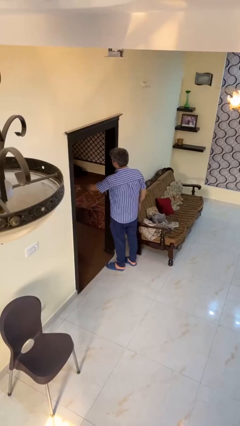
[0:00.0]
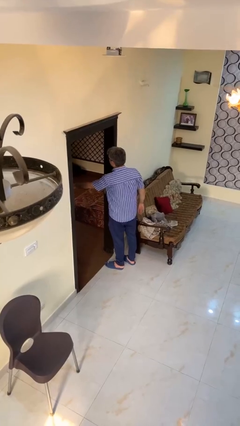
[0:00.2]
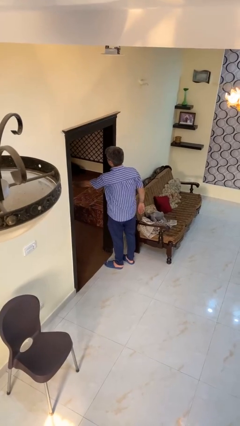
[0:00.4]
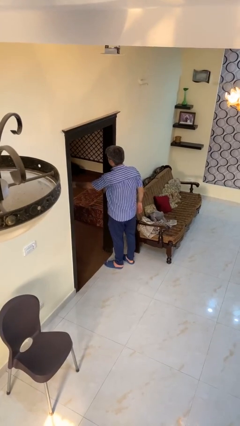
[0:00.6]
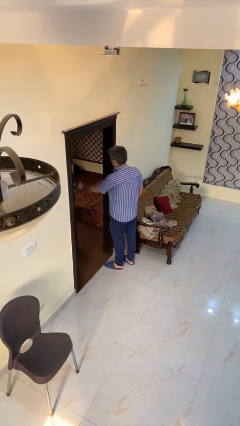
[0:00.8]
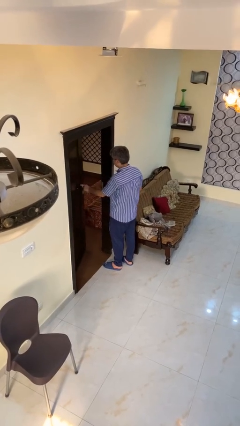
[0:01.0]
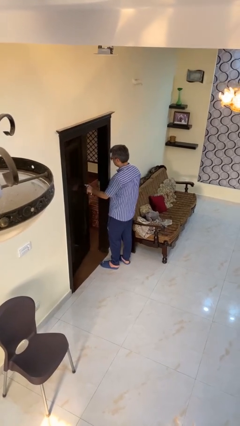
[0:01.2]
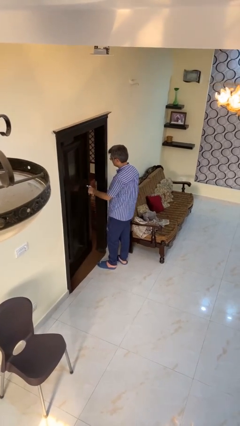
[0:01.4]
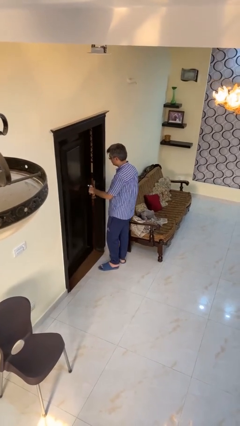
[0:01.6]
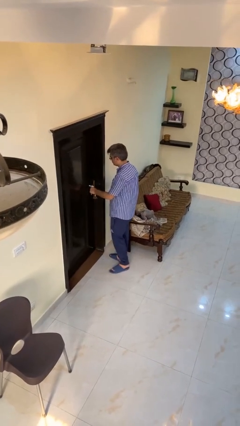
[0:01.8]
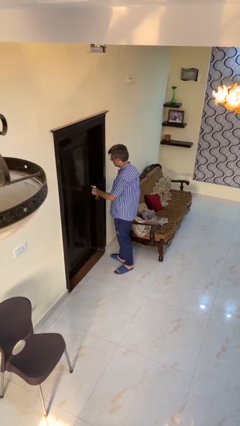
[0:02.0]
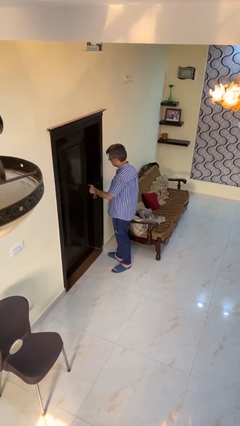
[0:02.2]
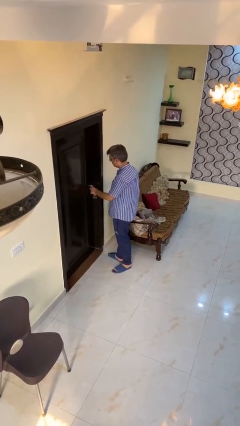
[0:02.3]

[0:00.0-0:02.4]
person closes facility door

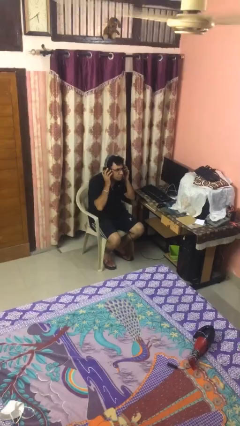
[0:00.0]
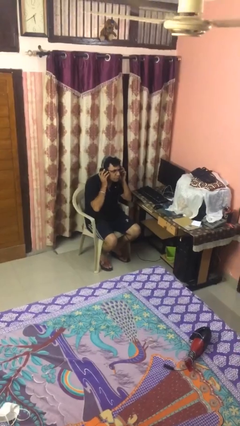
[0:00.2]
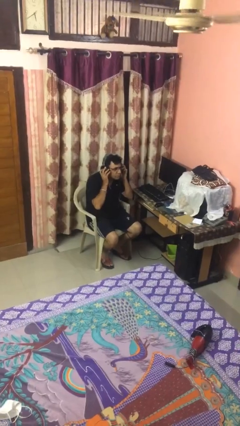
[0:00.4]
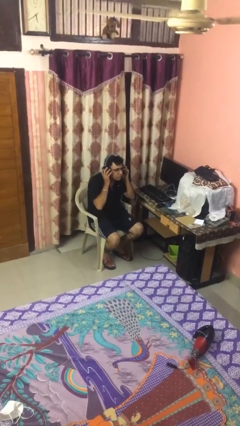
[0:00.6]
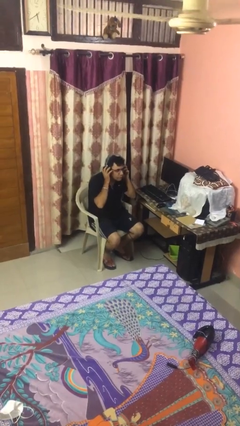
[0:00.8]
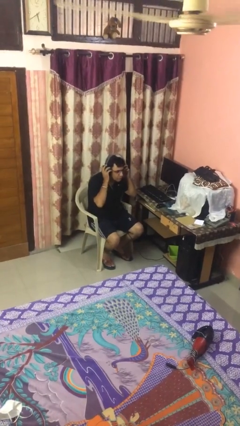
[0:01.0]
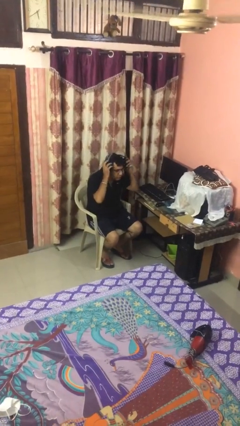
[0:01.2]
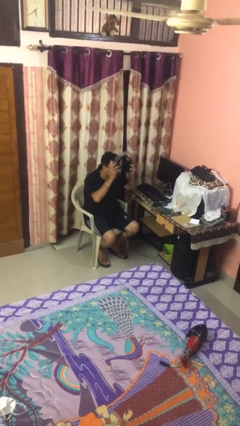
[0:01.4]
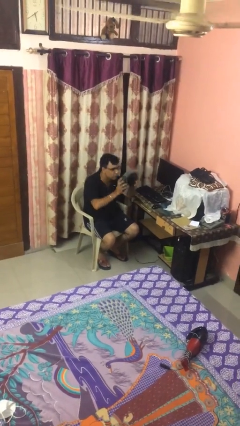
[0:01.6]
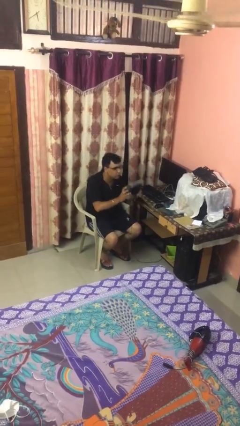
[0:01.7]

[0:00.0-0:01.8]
person takes off headphones

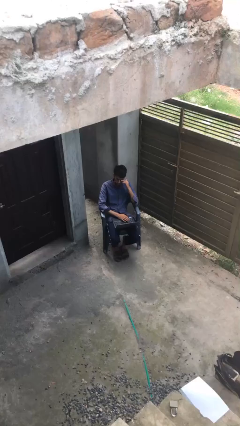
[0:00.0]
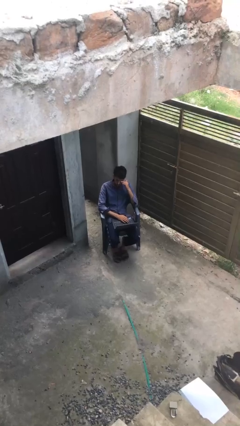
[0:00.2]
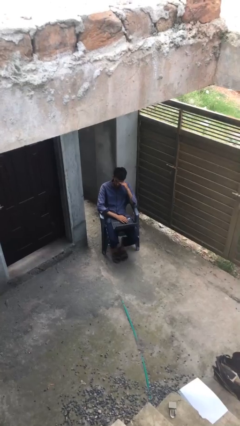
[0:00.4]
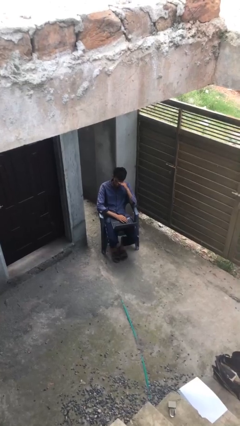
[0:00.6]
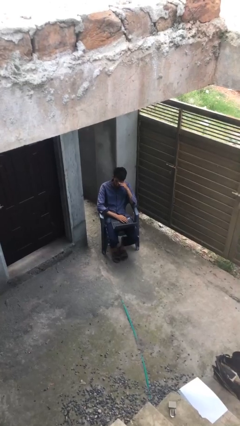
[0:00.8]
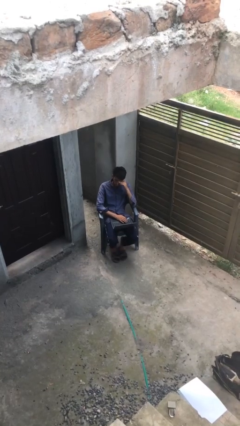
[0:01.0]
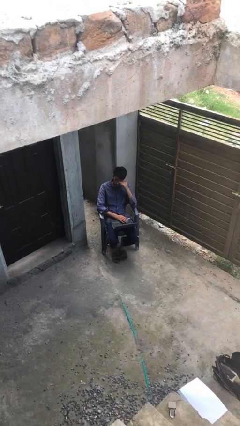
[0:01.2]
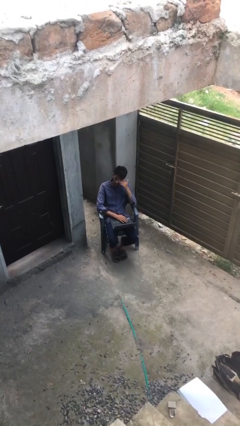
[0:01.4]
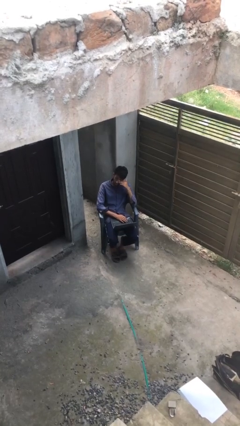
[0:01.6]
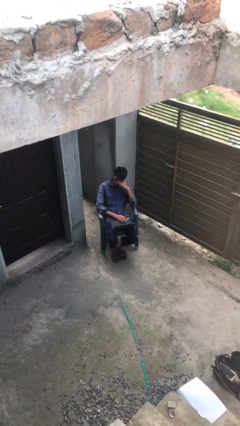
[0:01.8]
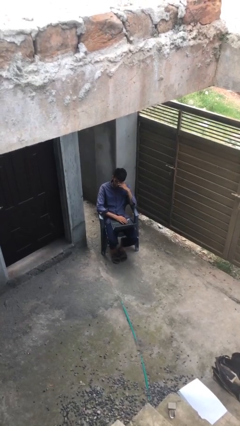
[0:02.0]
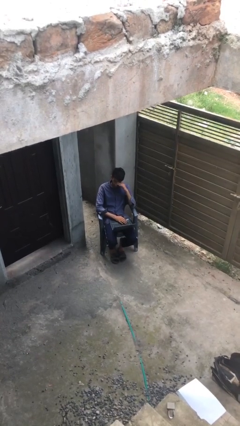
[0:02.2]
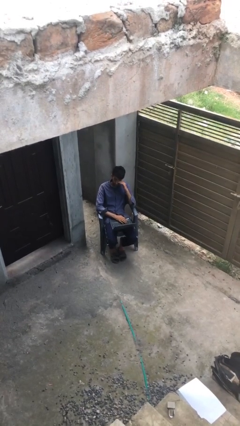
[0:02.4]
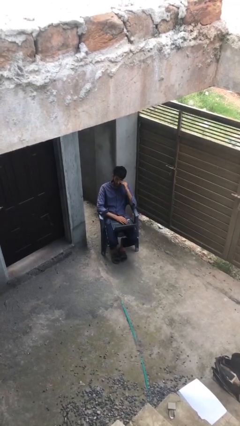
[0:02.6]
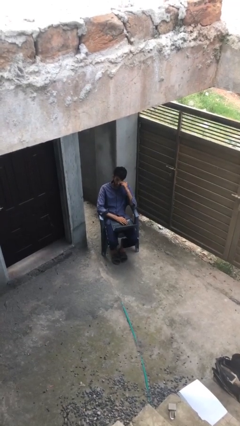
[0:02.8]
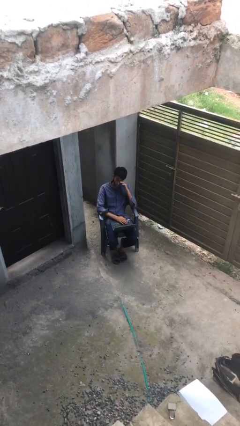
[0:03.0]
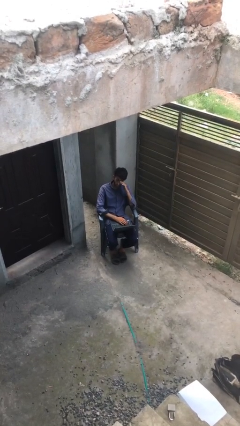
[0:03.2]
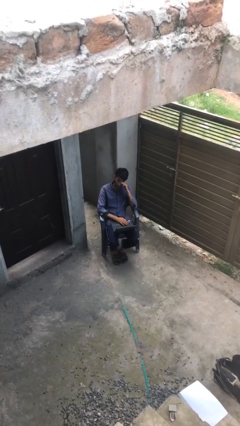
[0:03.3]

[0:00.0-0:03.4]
person interacts with laptop

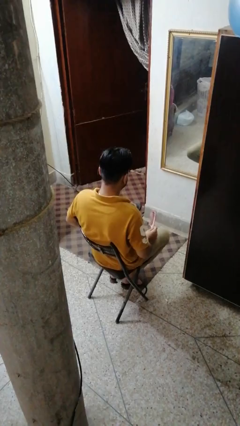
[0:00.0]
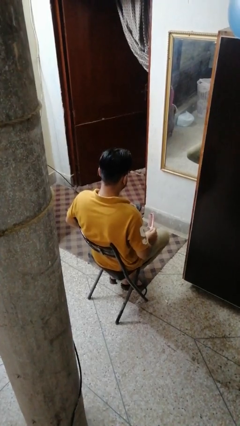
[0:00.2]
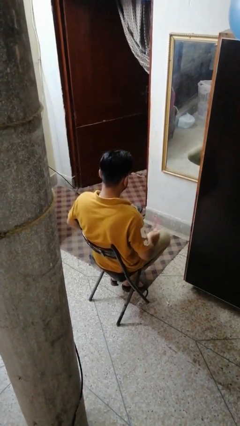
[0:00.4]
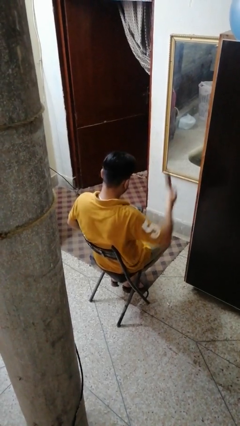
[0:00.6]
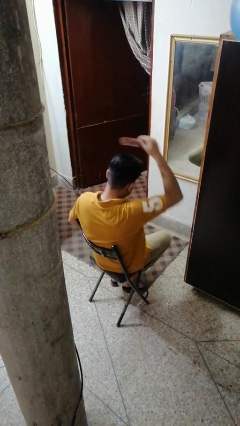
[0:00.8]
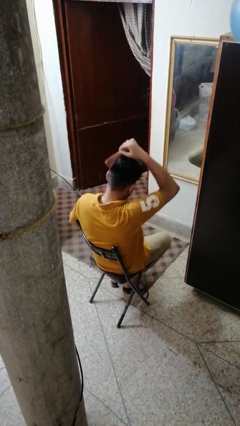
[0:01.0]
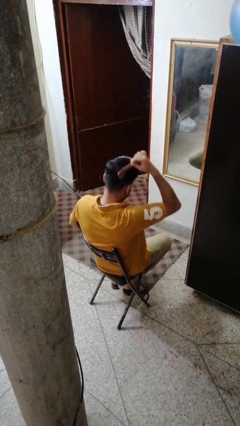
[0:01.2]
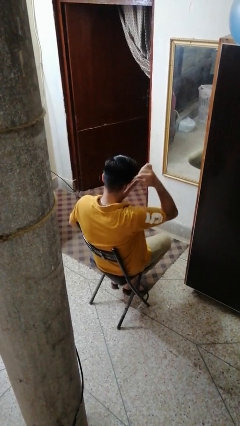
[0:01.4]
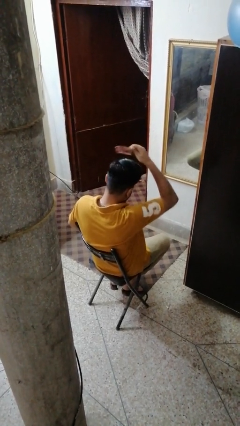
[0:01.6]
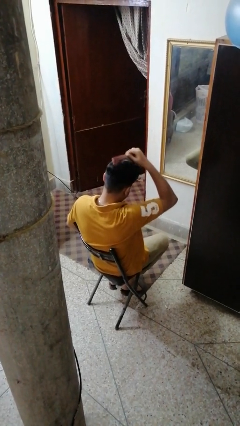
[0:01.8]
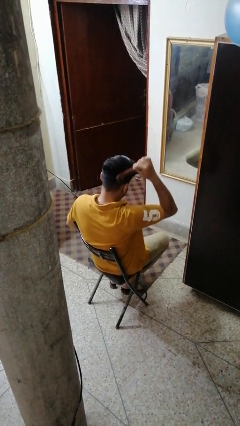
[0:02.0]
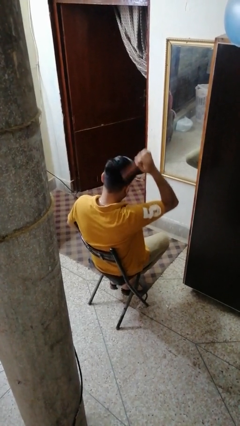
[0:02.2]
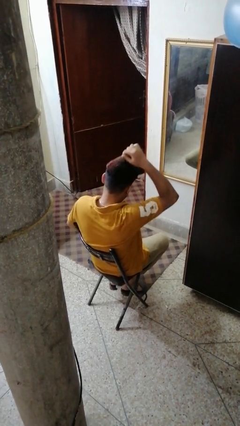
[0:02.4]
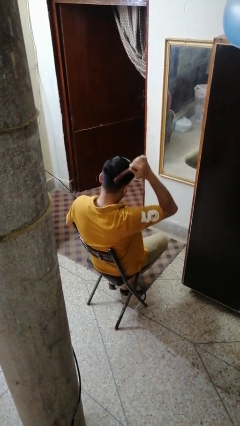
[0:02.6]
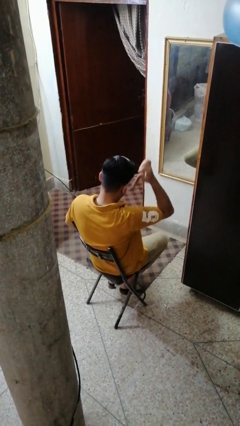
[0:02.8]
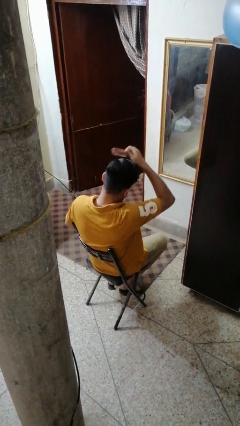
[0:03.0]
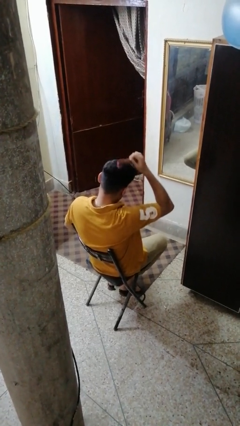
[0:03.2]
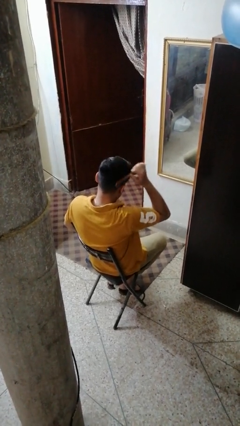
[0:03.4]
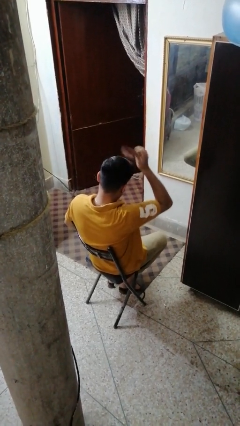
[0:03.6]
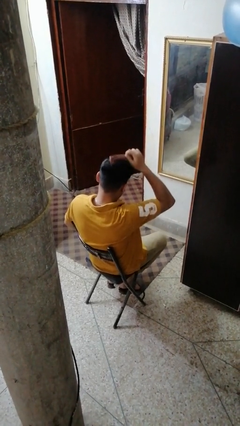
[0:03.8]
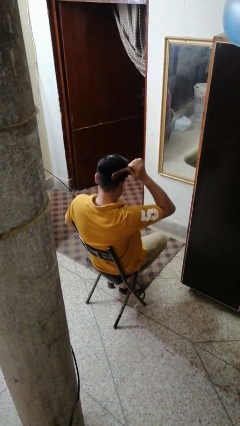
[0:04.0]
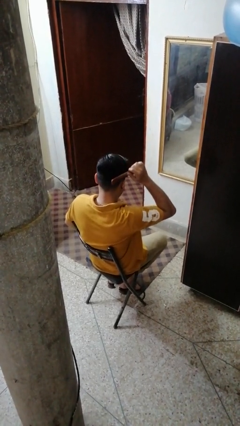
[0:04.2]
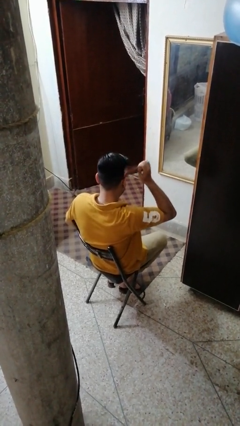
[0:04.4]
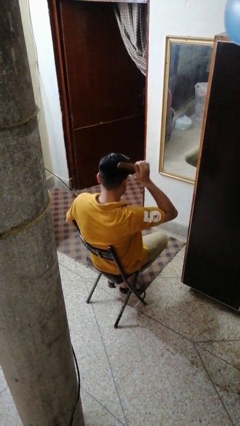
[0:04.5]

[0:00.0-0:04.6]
person brushes hair

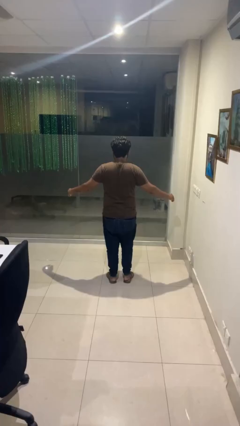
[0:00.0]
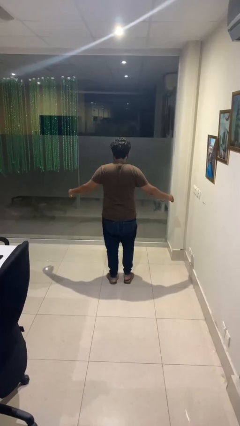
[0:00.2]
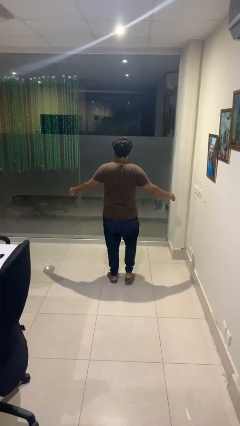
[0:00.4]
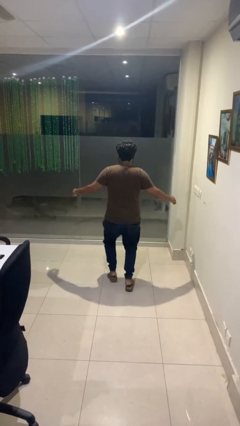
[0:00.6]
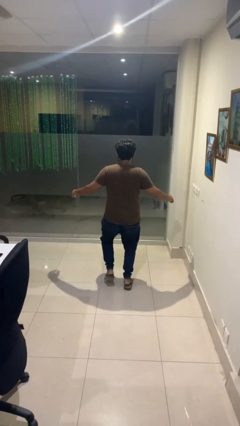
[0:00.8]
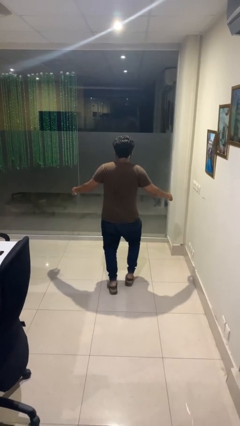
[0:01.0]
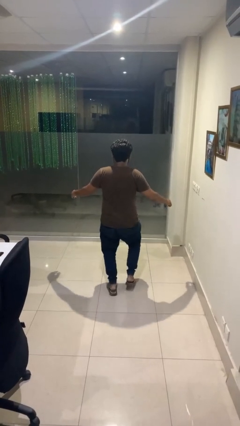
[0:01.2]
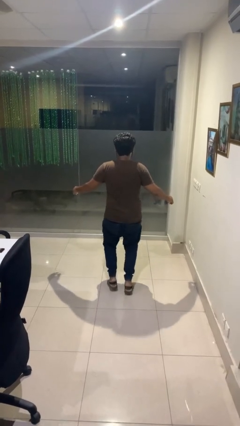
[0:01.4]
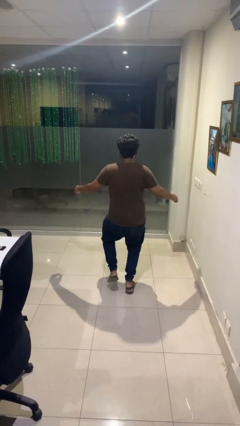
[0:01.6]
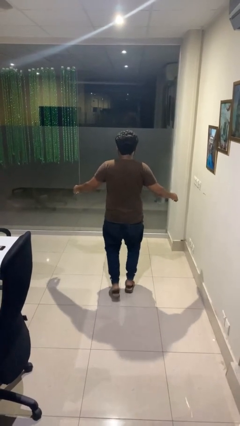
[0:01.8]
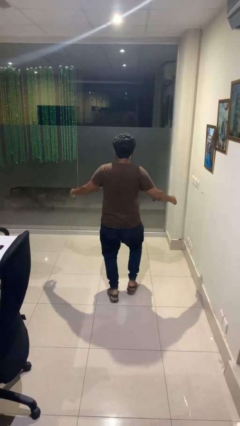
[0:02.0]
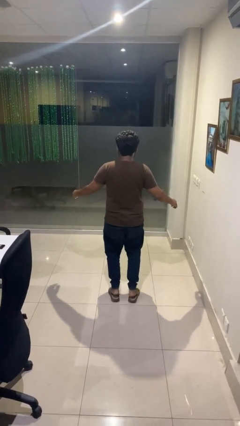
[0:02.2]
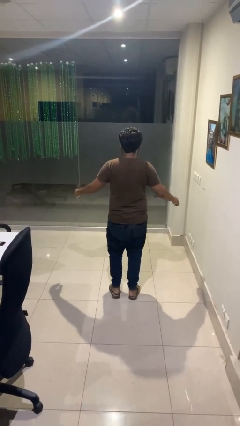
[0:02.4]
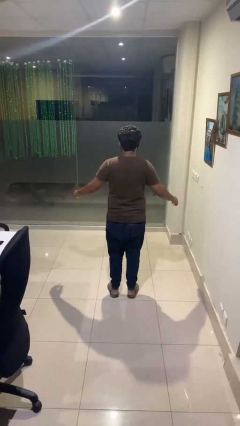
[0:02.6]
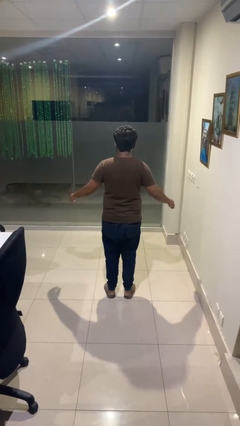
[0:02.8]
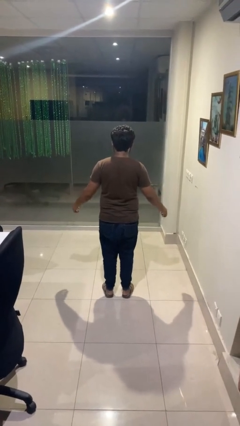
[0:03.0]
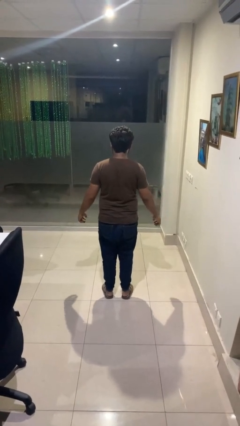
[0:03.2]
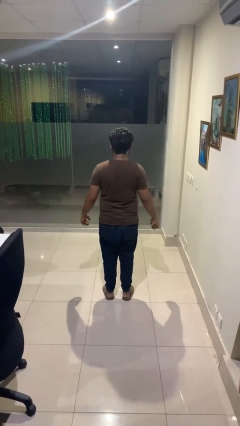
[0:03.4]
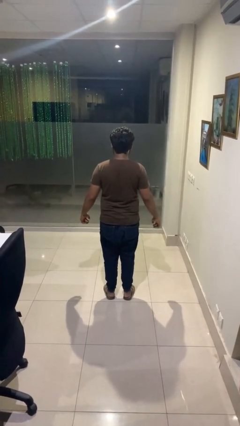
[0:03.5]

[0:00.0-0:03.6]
person walks tiptoe

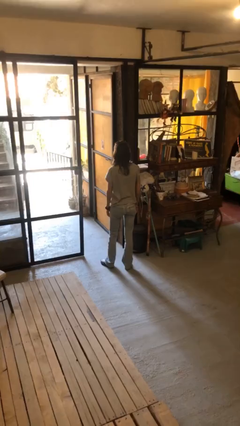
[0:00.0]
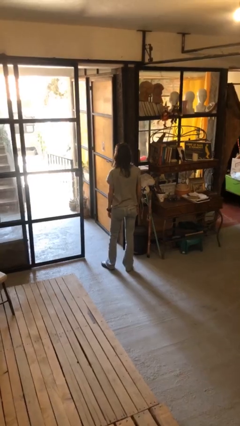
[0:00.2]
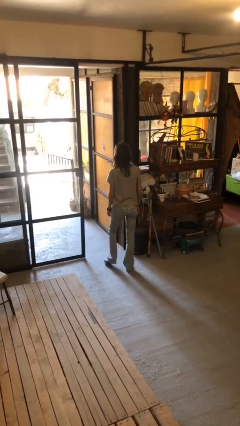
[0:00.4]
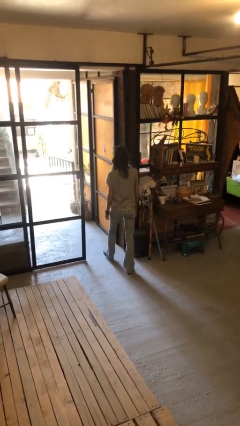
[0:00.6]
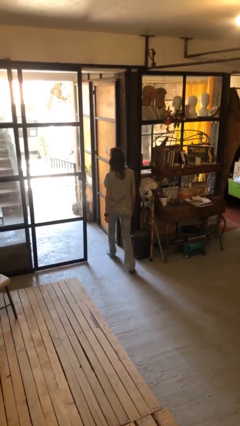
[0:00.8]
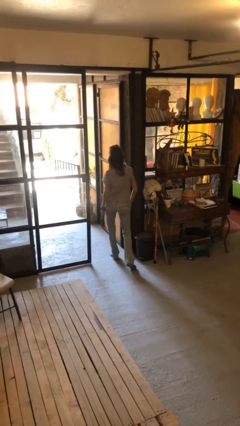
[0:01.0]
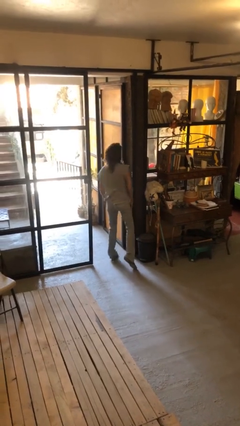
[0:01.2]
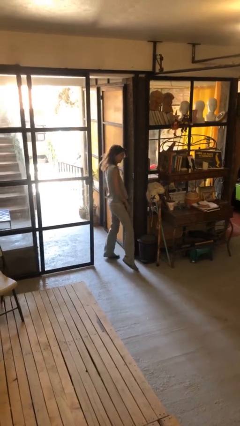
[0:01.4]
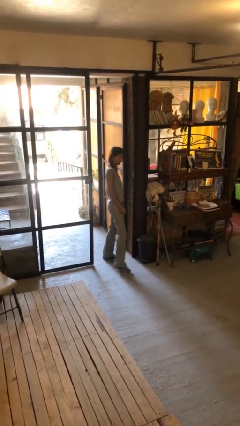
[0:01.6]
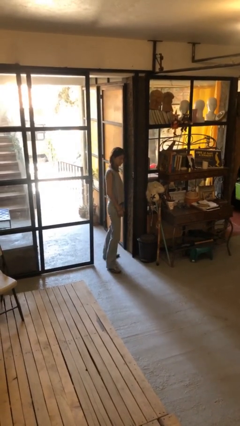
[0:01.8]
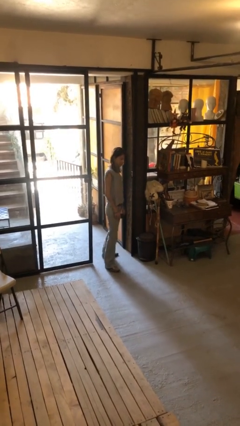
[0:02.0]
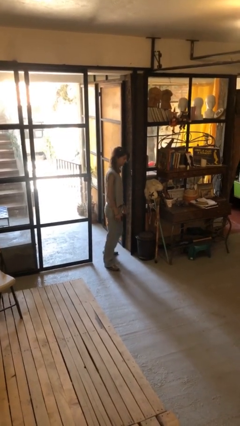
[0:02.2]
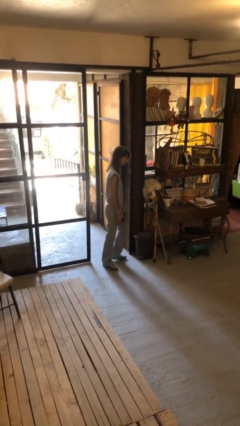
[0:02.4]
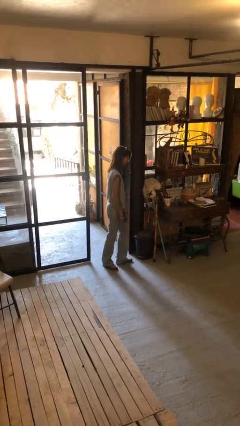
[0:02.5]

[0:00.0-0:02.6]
person bumps into wall
